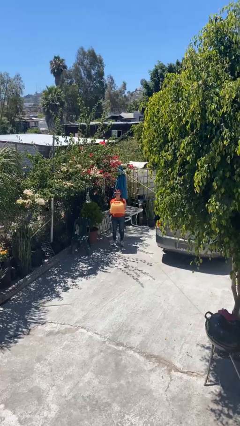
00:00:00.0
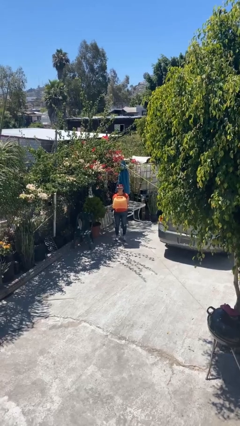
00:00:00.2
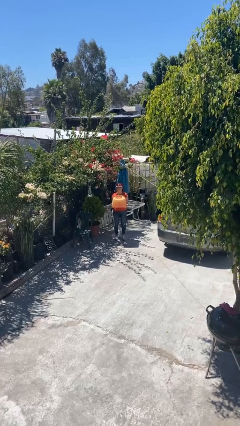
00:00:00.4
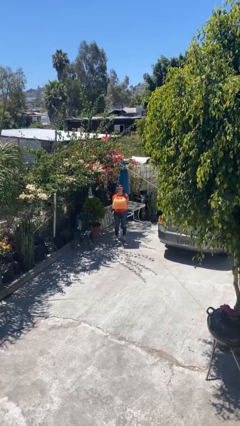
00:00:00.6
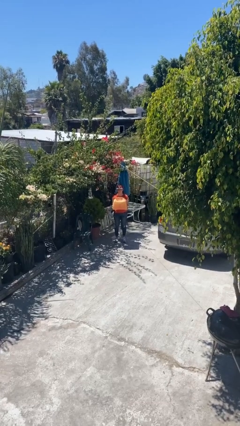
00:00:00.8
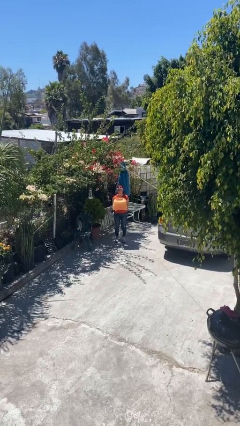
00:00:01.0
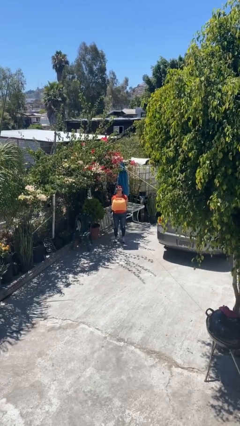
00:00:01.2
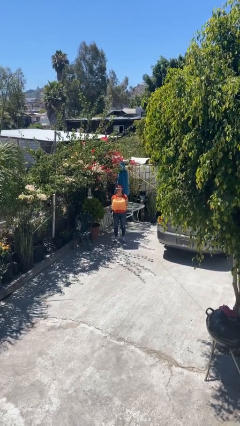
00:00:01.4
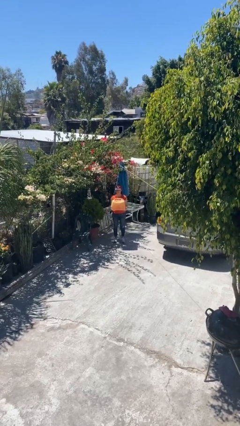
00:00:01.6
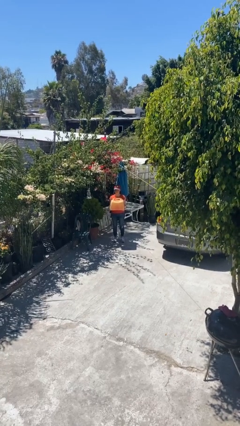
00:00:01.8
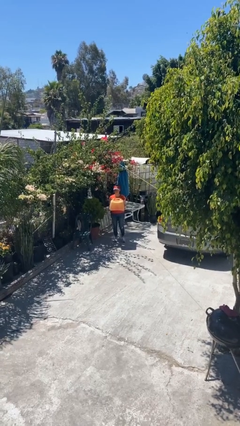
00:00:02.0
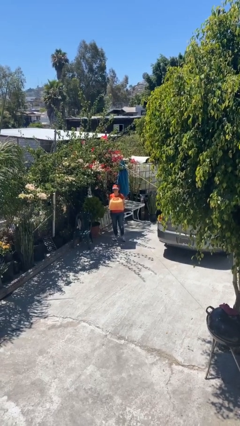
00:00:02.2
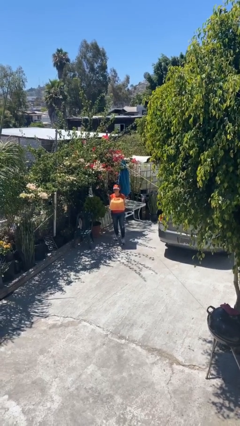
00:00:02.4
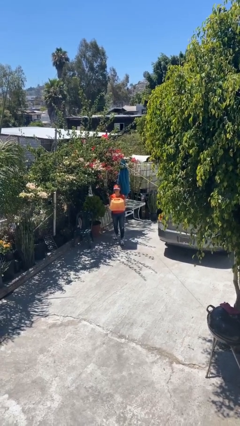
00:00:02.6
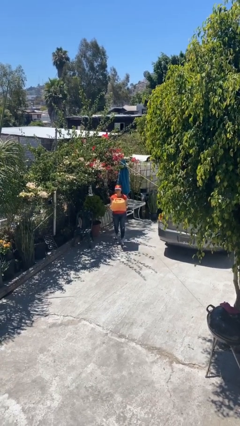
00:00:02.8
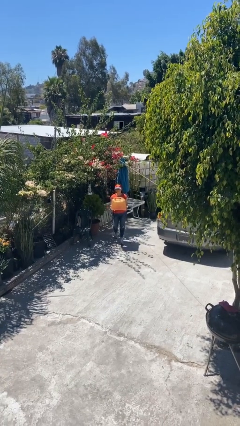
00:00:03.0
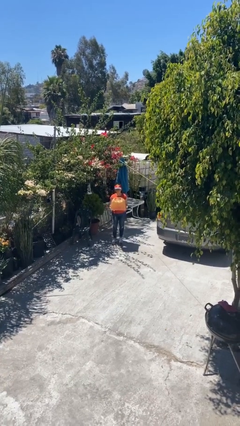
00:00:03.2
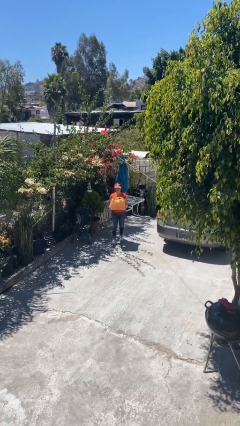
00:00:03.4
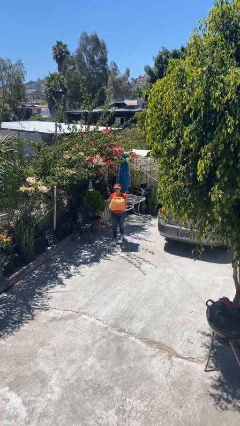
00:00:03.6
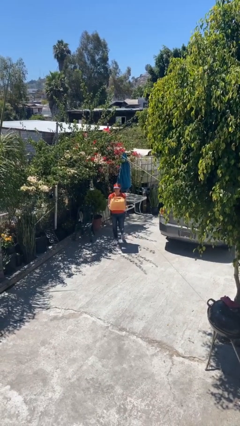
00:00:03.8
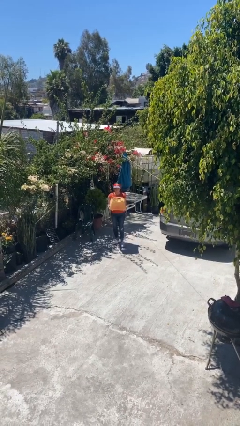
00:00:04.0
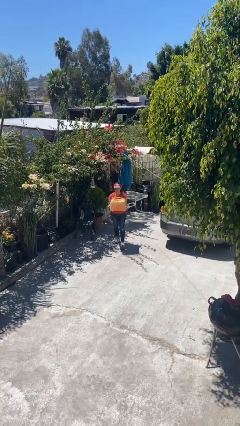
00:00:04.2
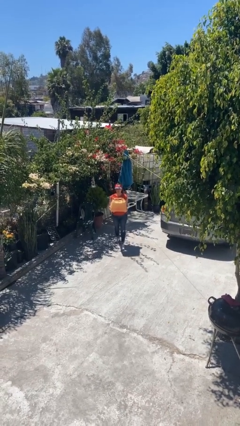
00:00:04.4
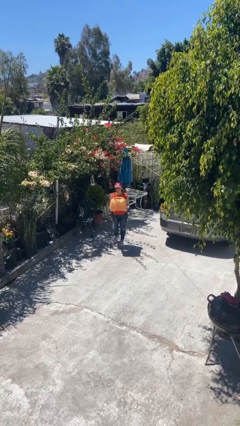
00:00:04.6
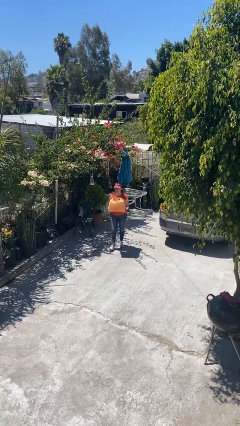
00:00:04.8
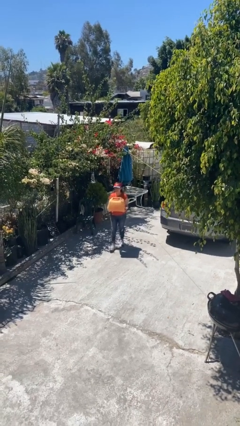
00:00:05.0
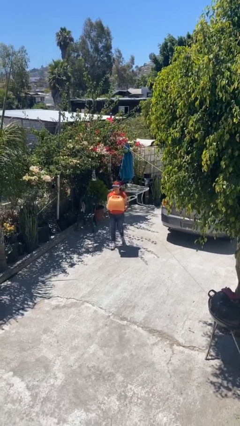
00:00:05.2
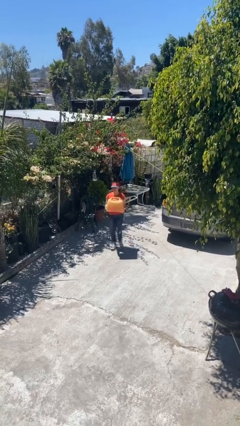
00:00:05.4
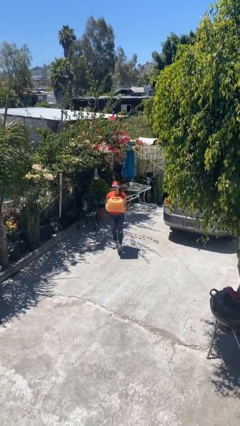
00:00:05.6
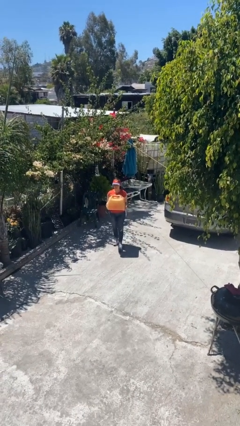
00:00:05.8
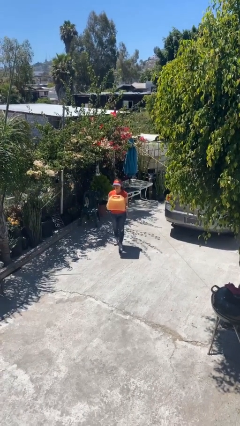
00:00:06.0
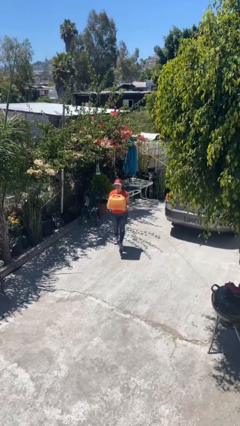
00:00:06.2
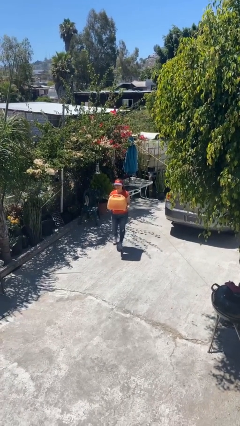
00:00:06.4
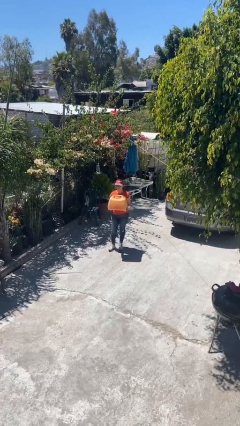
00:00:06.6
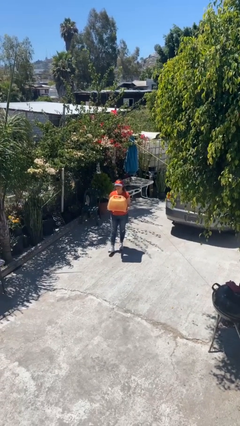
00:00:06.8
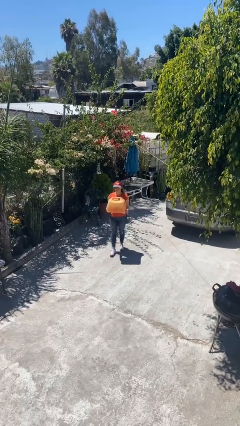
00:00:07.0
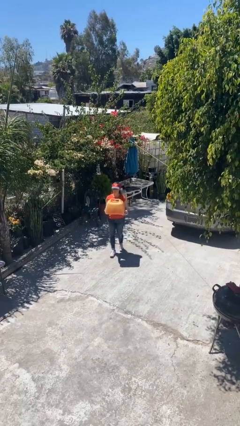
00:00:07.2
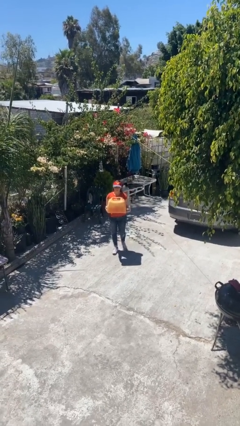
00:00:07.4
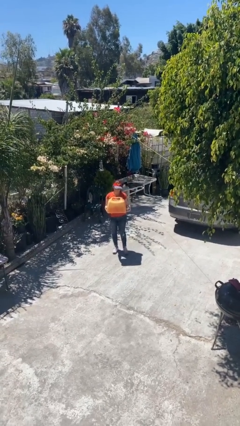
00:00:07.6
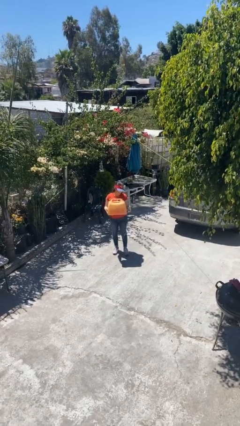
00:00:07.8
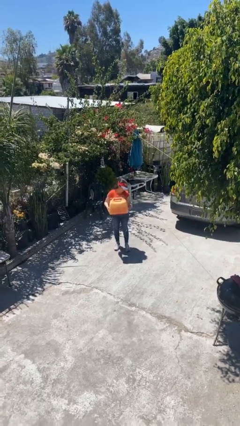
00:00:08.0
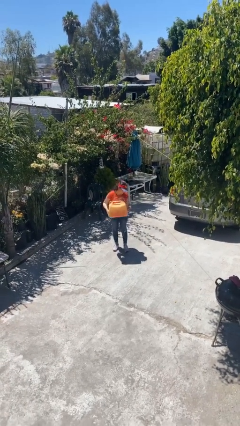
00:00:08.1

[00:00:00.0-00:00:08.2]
person carries heavy object

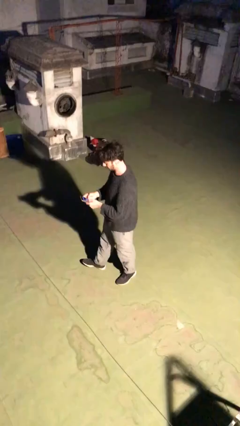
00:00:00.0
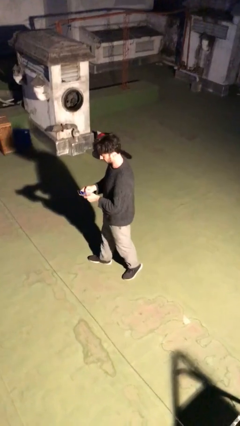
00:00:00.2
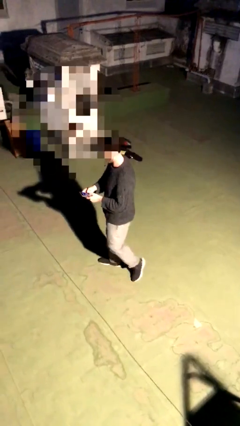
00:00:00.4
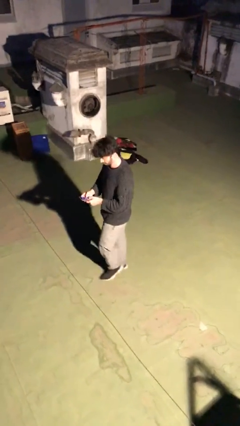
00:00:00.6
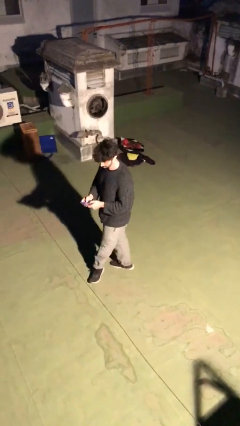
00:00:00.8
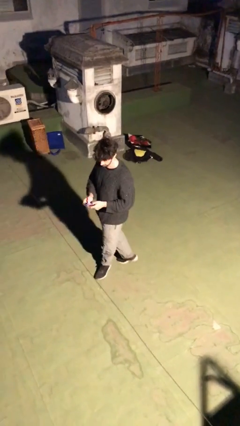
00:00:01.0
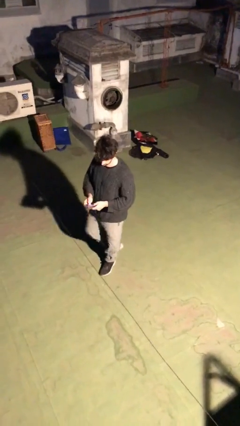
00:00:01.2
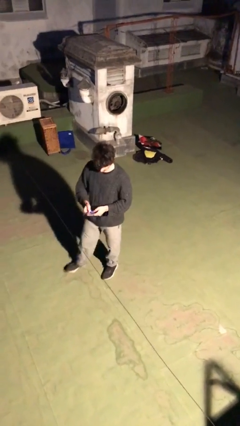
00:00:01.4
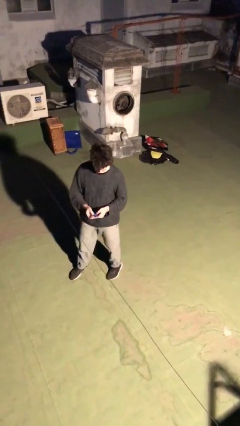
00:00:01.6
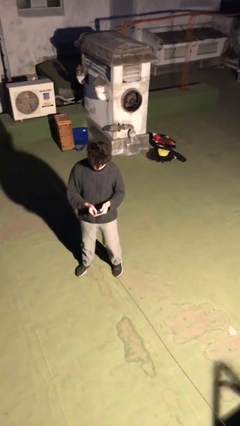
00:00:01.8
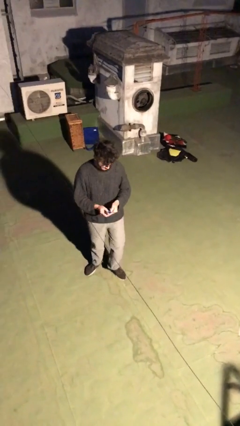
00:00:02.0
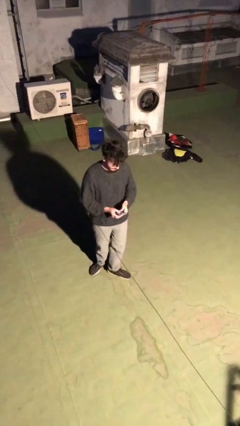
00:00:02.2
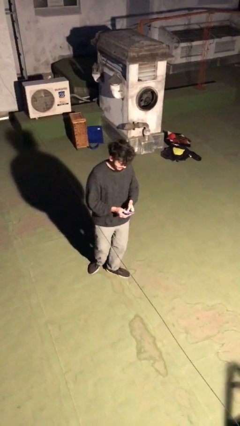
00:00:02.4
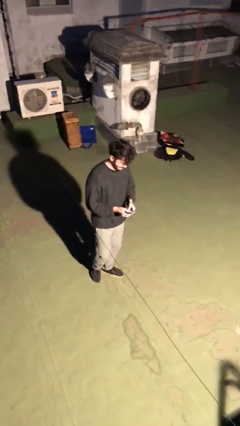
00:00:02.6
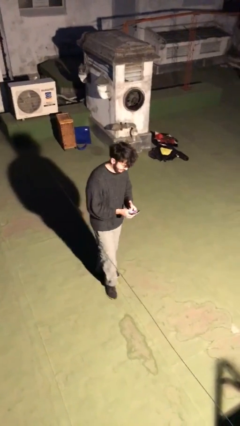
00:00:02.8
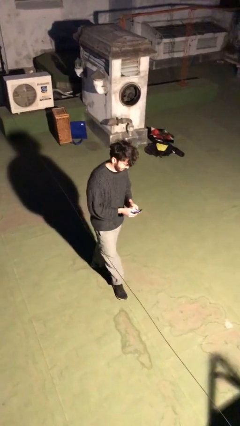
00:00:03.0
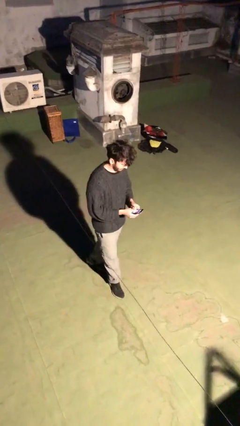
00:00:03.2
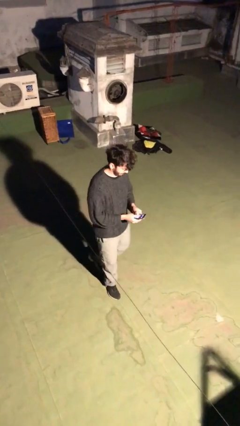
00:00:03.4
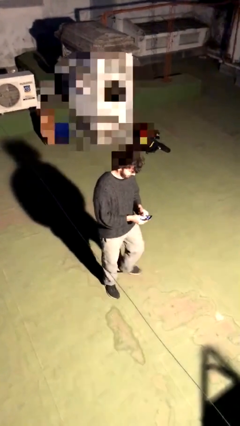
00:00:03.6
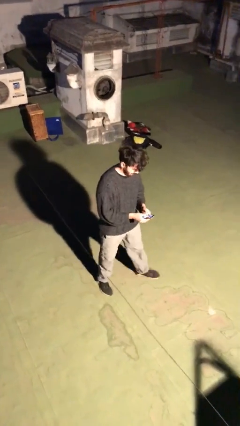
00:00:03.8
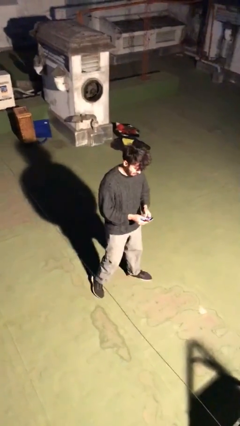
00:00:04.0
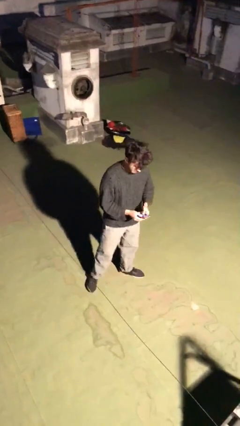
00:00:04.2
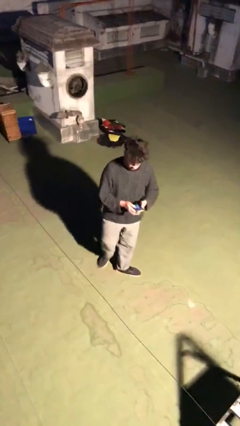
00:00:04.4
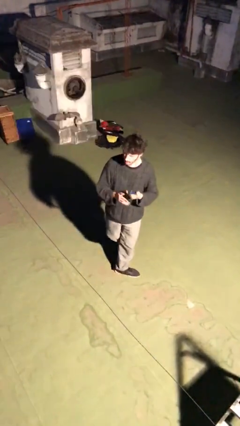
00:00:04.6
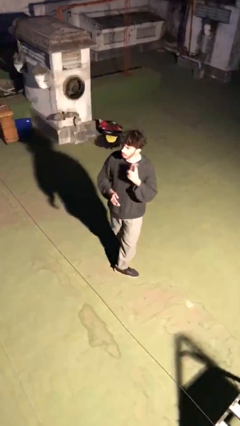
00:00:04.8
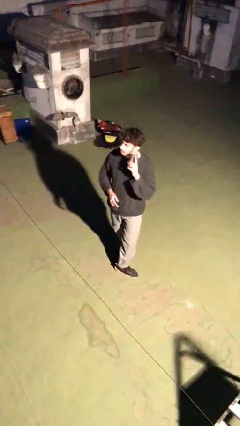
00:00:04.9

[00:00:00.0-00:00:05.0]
person texts on phone

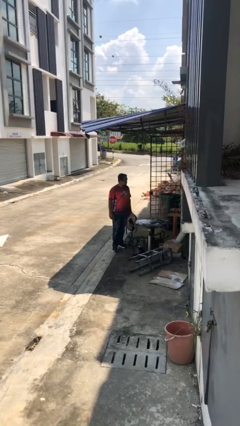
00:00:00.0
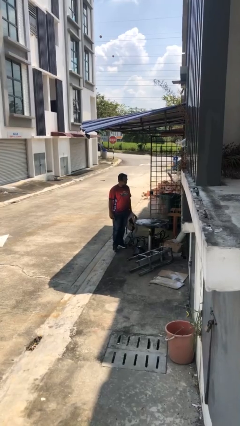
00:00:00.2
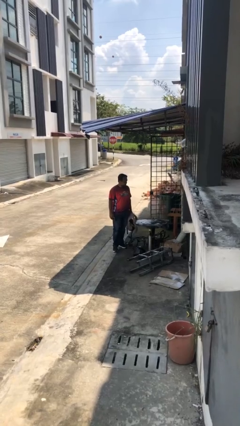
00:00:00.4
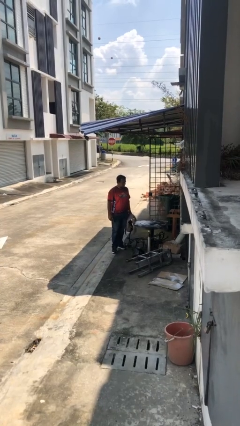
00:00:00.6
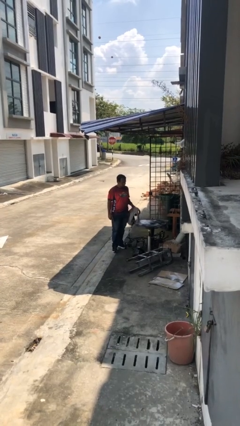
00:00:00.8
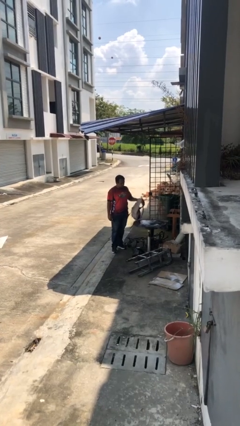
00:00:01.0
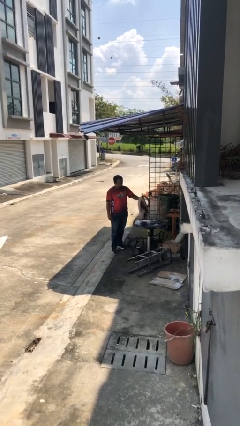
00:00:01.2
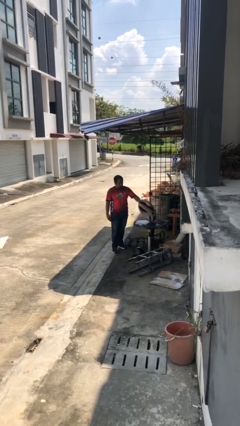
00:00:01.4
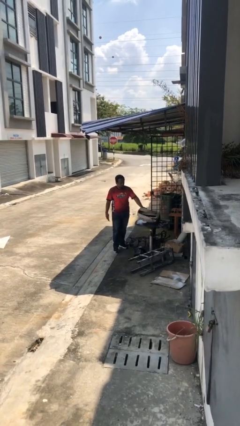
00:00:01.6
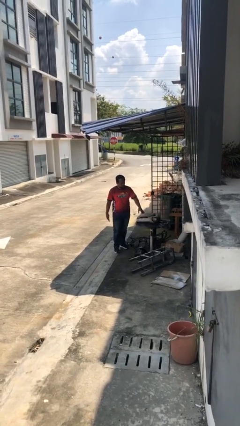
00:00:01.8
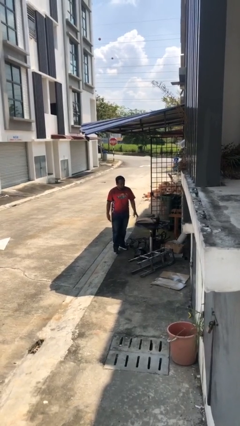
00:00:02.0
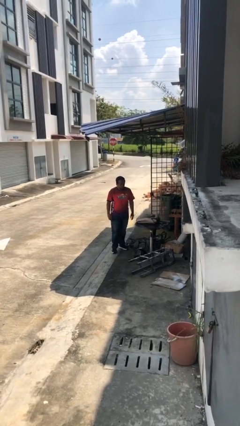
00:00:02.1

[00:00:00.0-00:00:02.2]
person puts down object on table

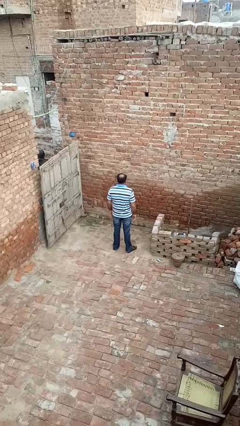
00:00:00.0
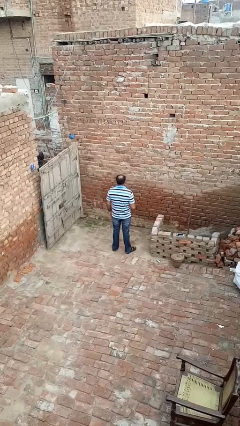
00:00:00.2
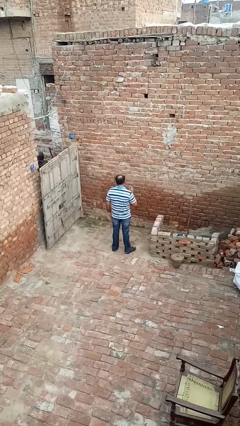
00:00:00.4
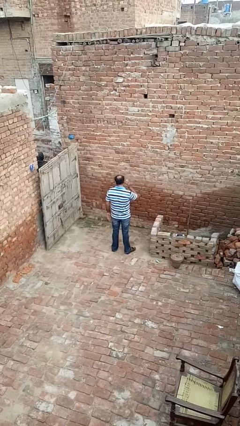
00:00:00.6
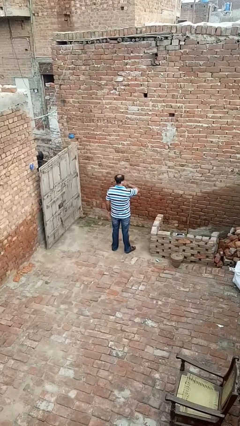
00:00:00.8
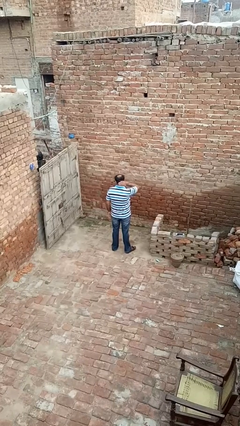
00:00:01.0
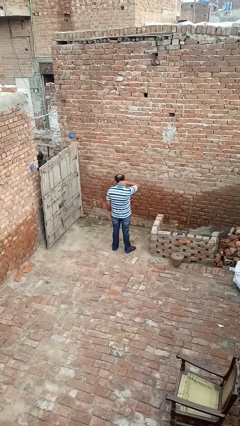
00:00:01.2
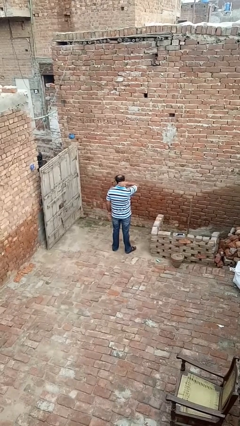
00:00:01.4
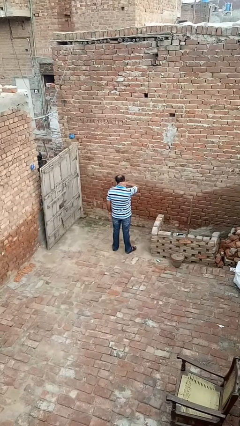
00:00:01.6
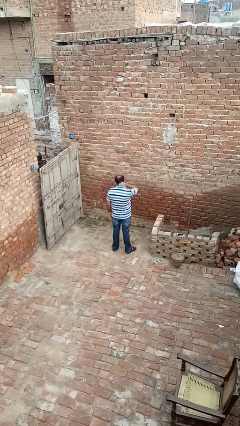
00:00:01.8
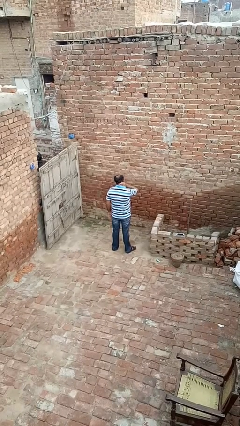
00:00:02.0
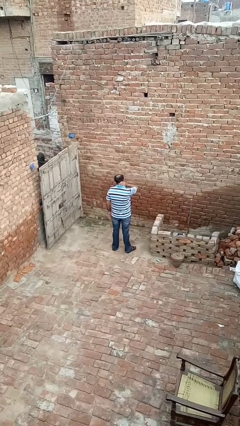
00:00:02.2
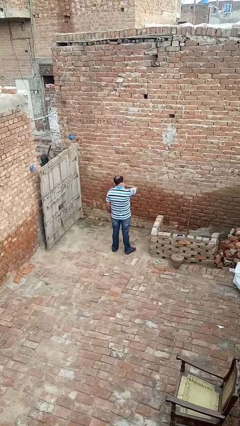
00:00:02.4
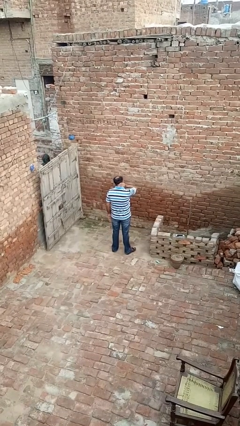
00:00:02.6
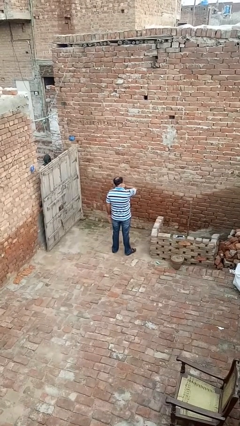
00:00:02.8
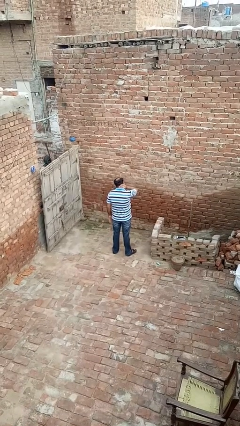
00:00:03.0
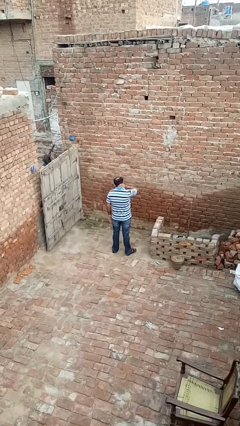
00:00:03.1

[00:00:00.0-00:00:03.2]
person rubs neck
